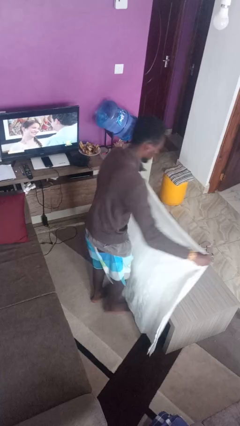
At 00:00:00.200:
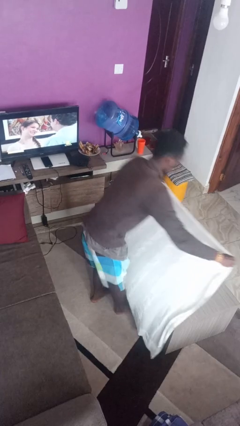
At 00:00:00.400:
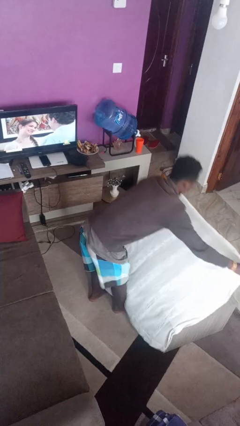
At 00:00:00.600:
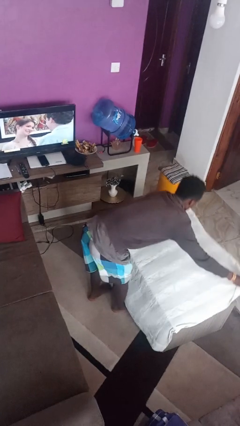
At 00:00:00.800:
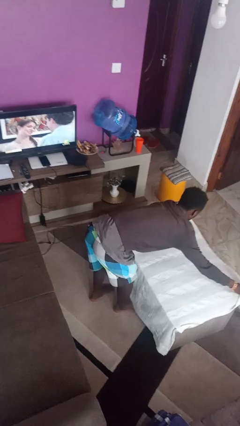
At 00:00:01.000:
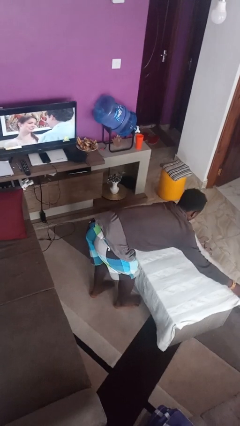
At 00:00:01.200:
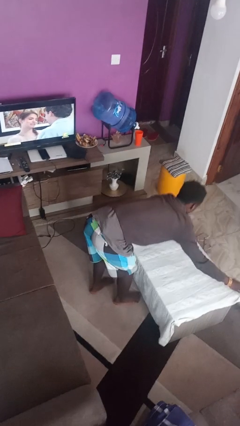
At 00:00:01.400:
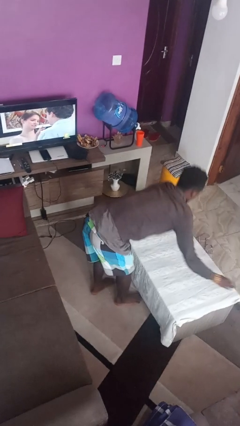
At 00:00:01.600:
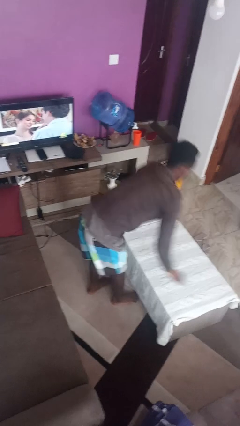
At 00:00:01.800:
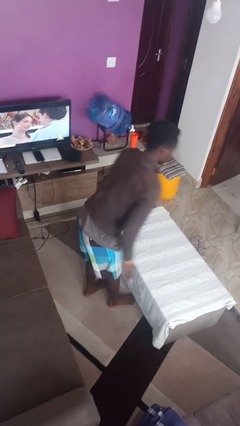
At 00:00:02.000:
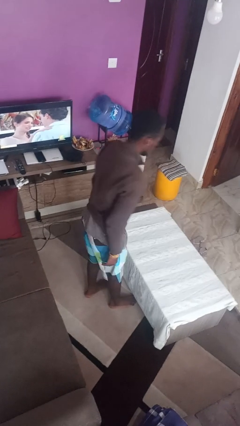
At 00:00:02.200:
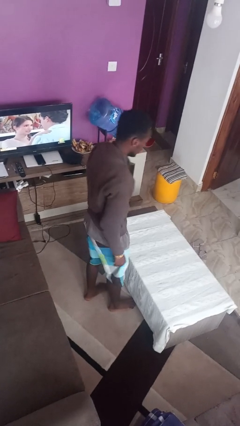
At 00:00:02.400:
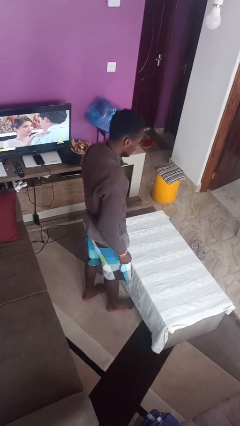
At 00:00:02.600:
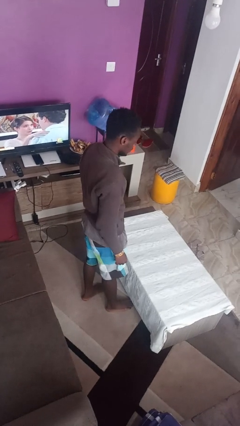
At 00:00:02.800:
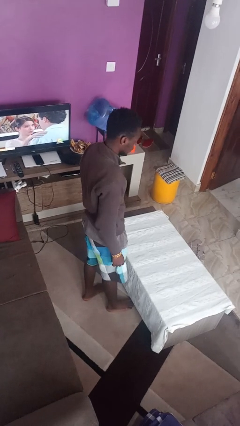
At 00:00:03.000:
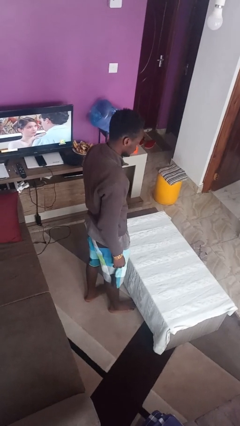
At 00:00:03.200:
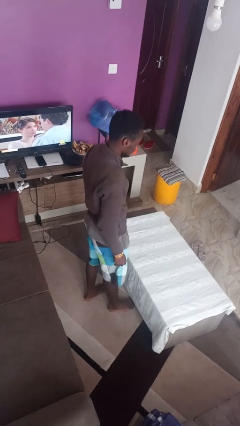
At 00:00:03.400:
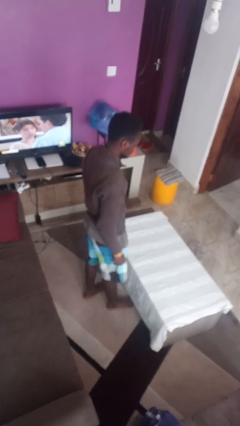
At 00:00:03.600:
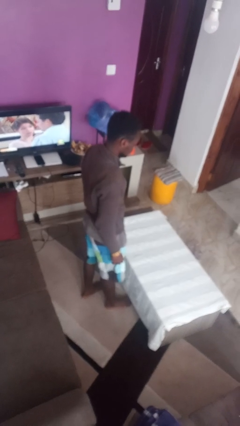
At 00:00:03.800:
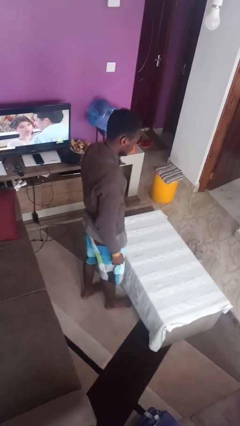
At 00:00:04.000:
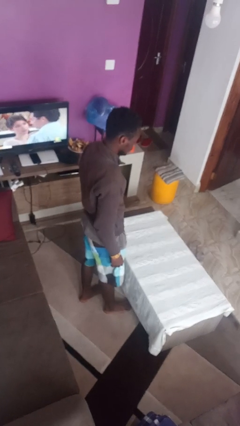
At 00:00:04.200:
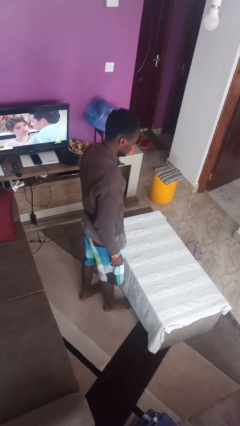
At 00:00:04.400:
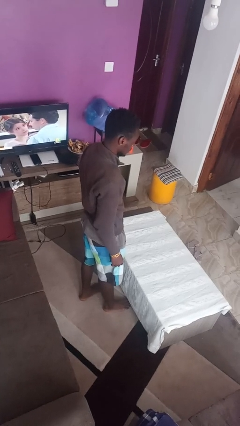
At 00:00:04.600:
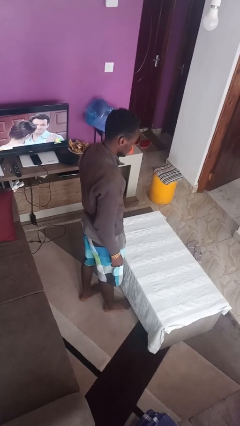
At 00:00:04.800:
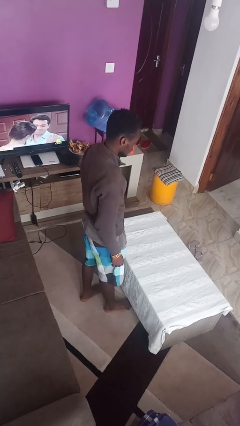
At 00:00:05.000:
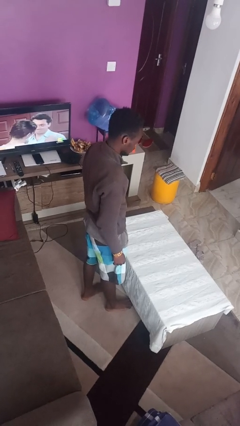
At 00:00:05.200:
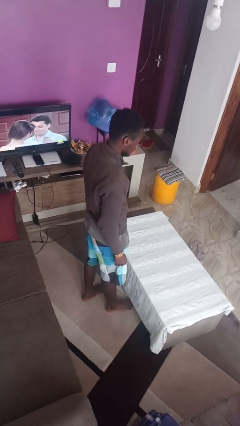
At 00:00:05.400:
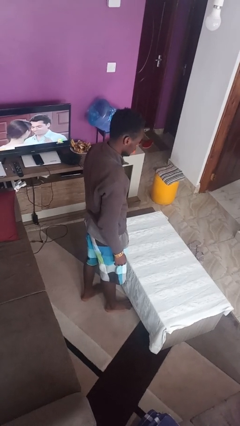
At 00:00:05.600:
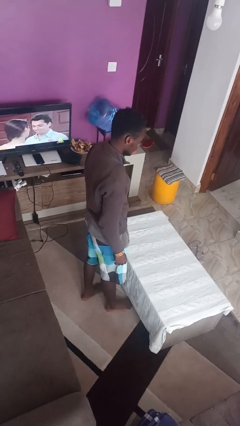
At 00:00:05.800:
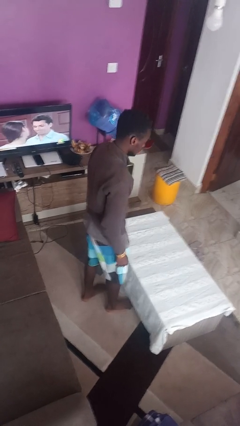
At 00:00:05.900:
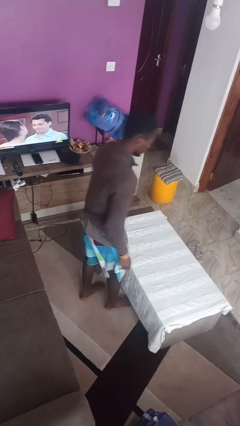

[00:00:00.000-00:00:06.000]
person spreads tablecloth

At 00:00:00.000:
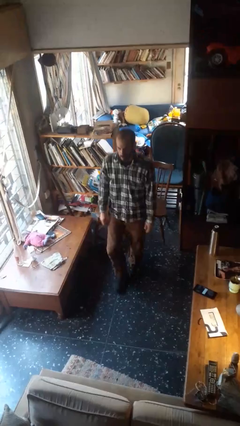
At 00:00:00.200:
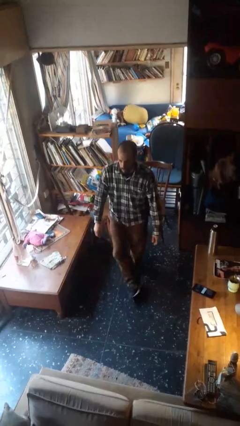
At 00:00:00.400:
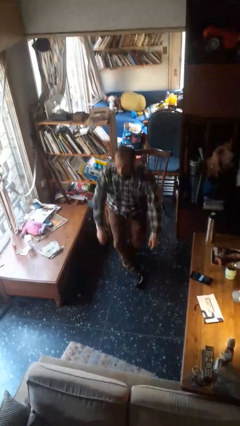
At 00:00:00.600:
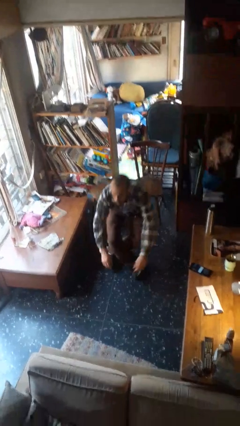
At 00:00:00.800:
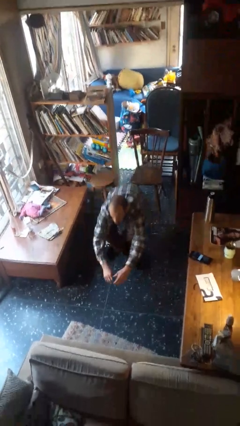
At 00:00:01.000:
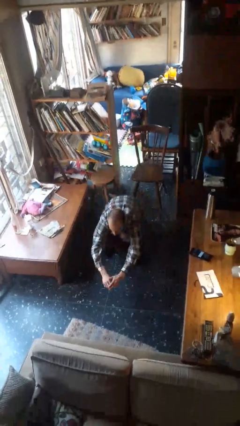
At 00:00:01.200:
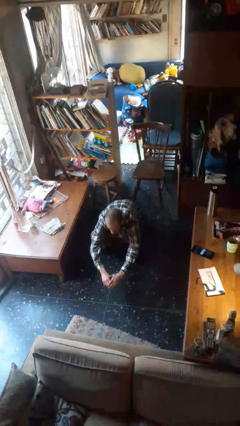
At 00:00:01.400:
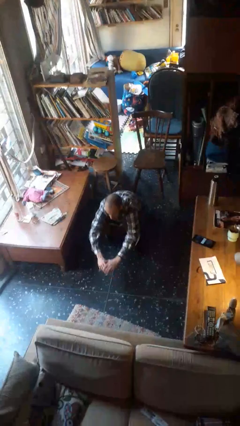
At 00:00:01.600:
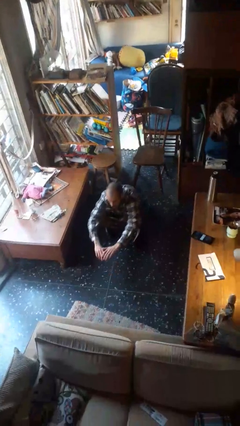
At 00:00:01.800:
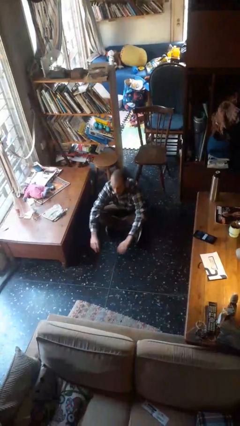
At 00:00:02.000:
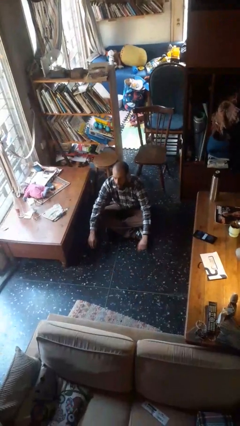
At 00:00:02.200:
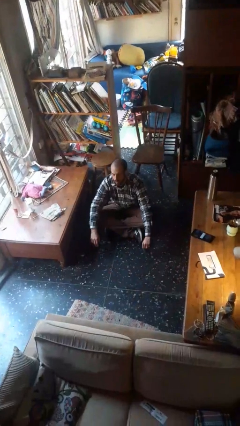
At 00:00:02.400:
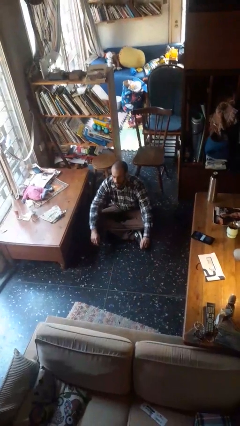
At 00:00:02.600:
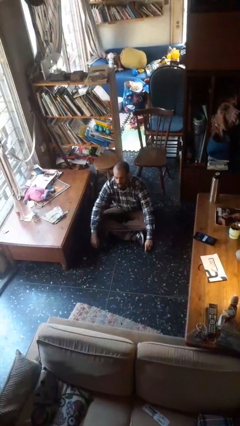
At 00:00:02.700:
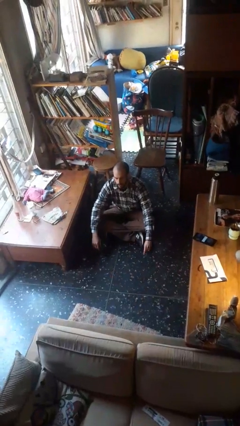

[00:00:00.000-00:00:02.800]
person sits crisscross

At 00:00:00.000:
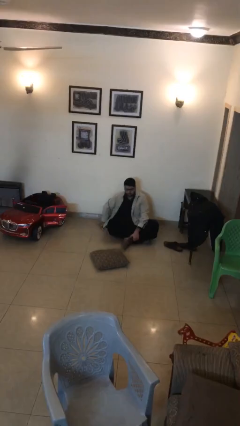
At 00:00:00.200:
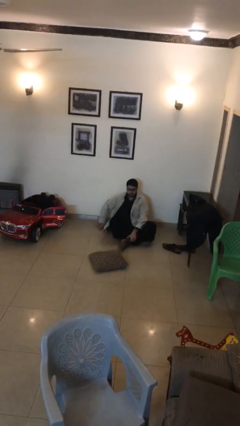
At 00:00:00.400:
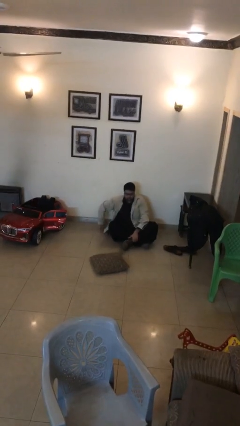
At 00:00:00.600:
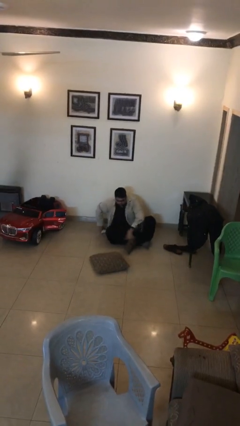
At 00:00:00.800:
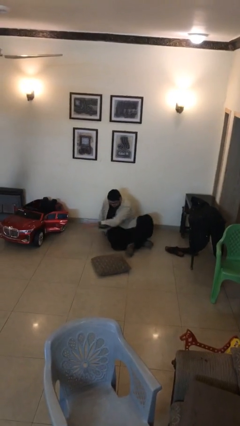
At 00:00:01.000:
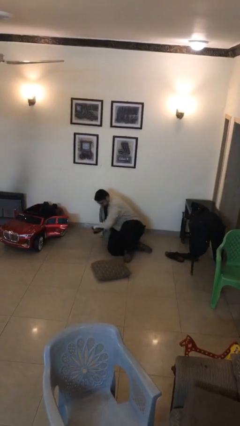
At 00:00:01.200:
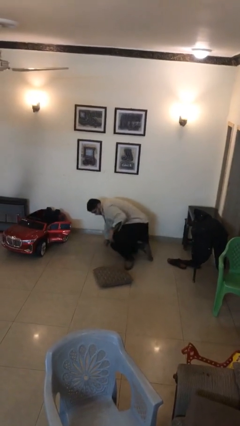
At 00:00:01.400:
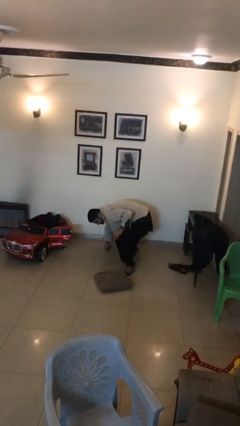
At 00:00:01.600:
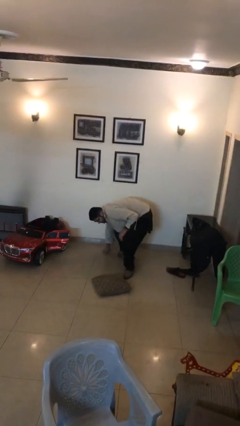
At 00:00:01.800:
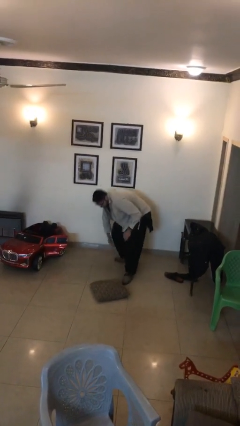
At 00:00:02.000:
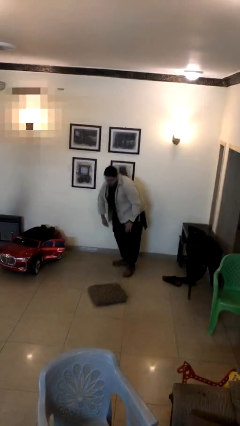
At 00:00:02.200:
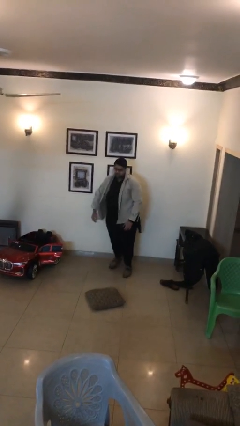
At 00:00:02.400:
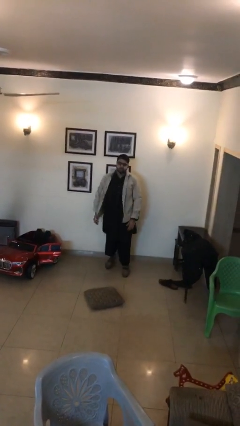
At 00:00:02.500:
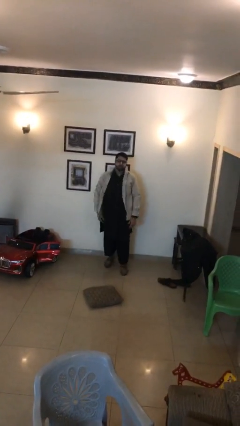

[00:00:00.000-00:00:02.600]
person stands up

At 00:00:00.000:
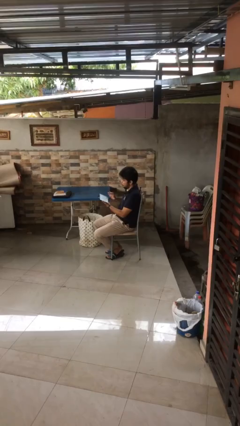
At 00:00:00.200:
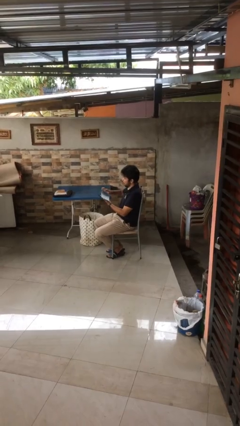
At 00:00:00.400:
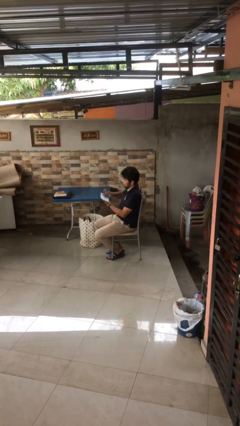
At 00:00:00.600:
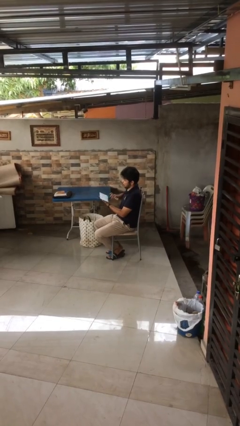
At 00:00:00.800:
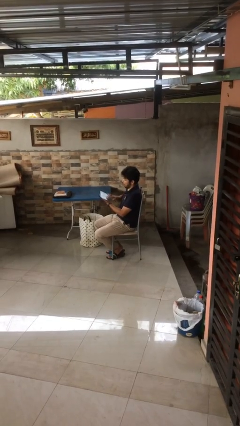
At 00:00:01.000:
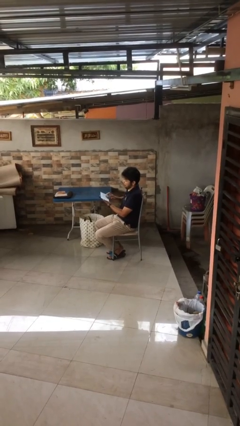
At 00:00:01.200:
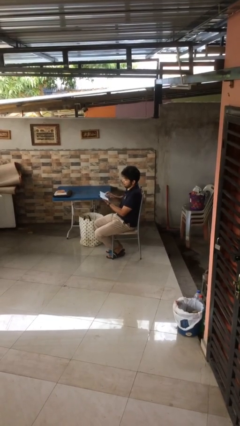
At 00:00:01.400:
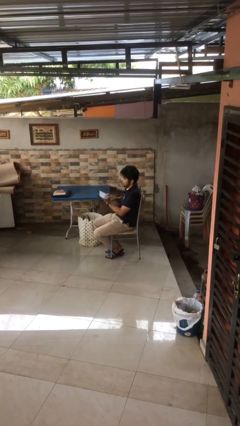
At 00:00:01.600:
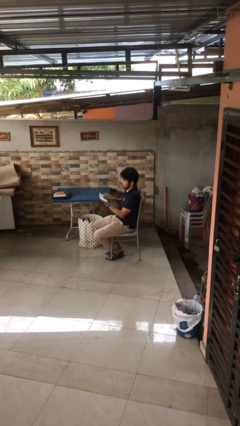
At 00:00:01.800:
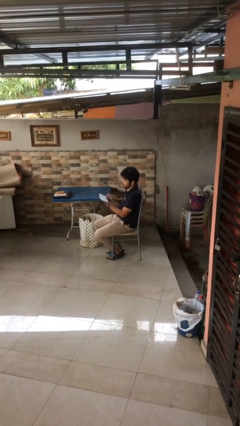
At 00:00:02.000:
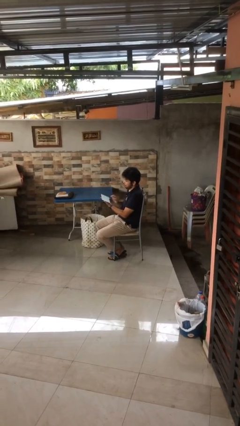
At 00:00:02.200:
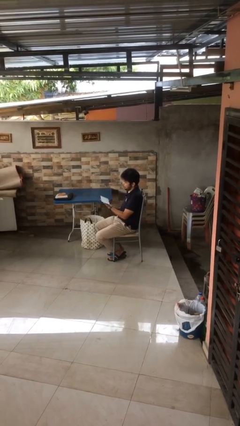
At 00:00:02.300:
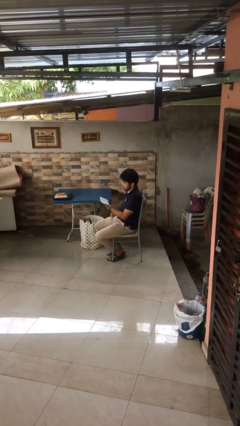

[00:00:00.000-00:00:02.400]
person interacts with tablet

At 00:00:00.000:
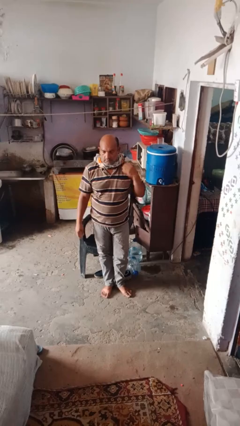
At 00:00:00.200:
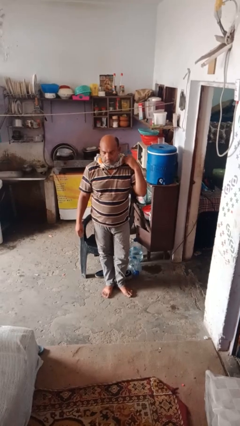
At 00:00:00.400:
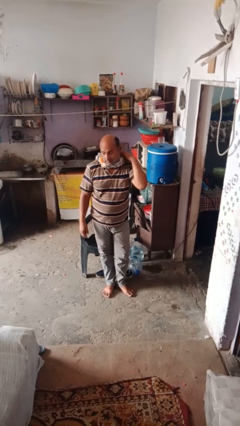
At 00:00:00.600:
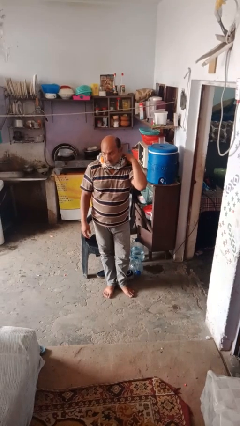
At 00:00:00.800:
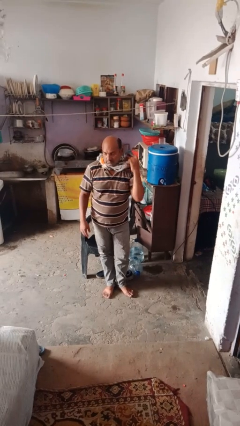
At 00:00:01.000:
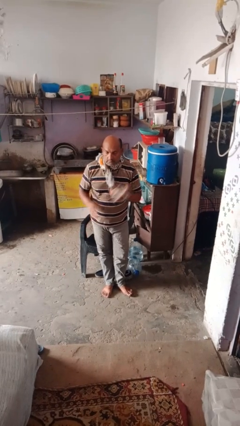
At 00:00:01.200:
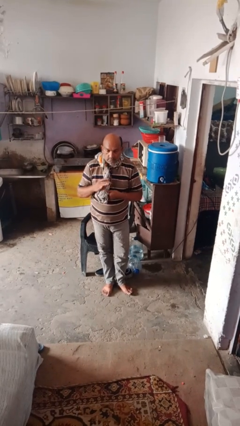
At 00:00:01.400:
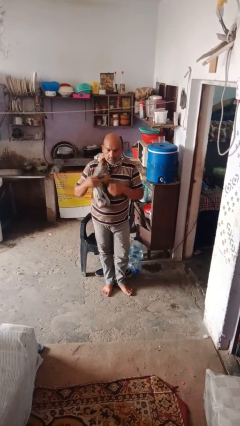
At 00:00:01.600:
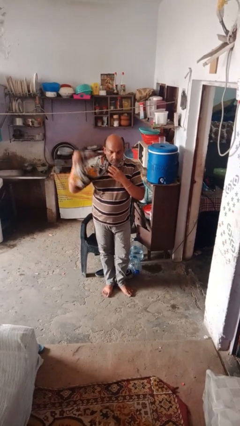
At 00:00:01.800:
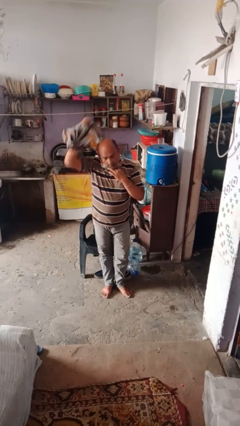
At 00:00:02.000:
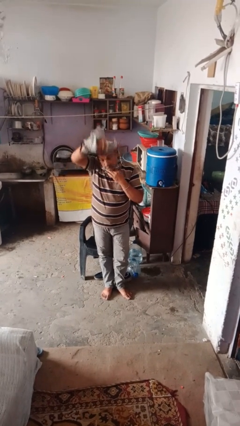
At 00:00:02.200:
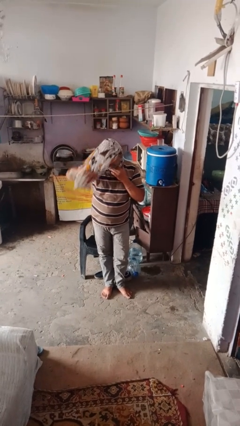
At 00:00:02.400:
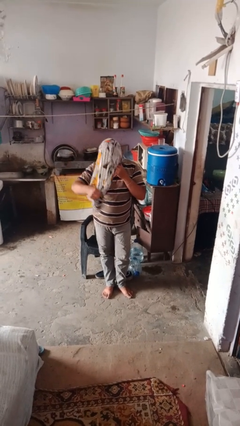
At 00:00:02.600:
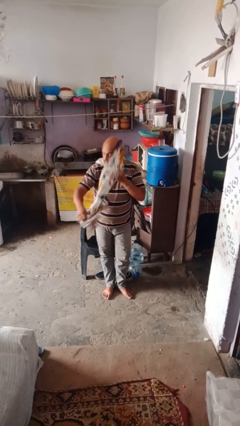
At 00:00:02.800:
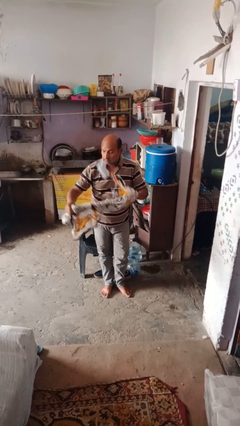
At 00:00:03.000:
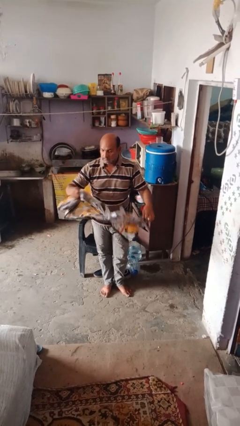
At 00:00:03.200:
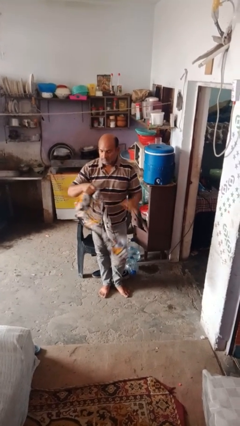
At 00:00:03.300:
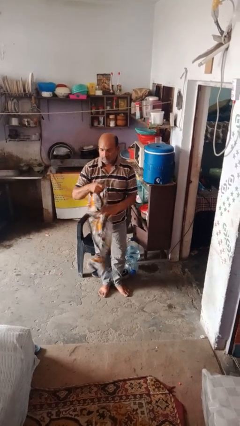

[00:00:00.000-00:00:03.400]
person takes off scarf
